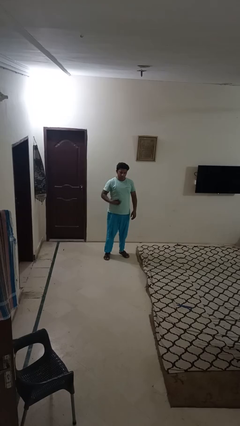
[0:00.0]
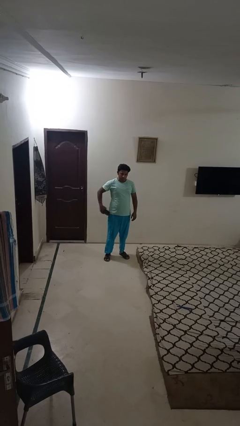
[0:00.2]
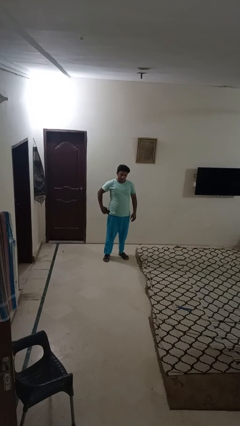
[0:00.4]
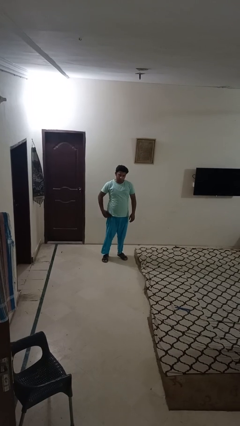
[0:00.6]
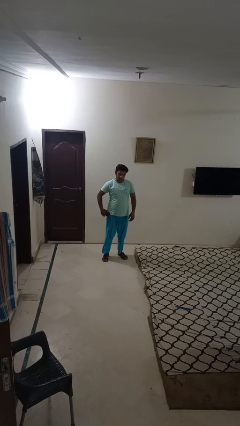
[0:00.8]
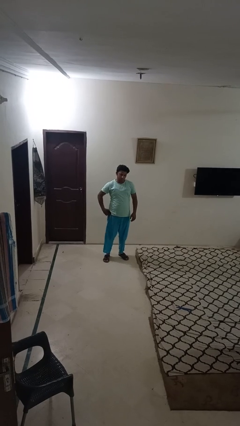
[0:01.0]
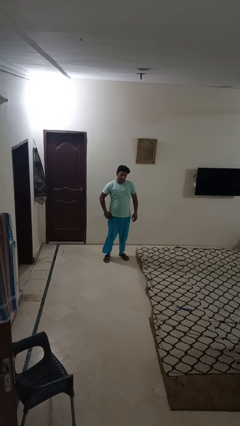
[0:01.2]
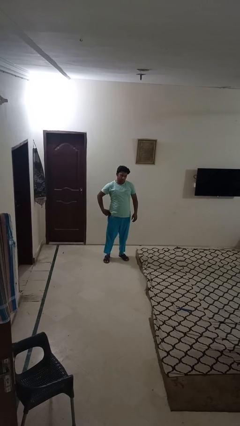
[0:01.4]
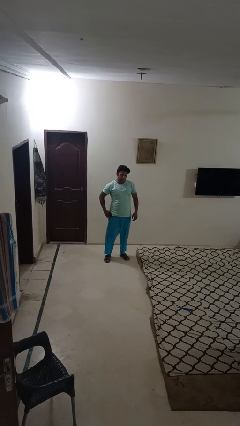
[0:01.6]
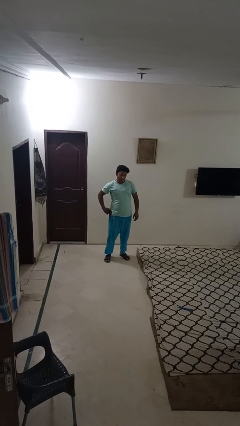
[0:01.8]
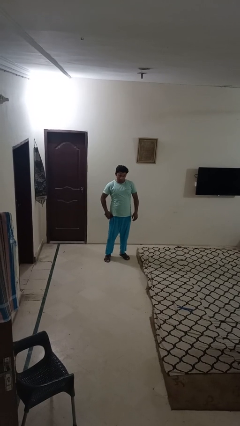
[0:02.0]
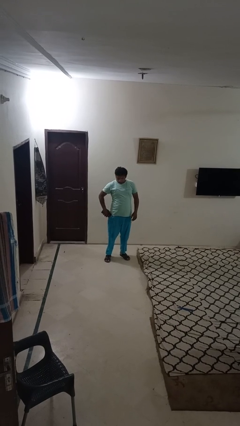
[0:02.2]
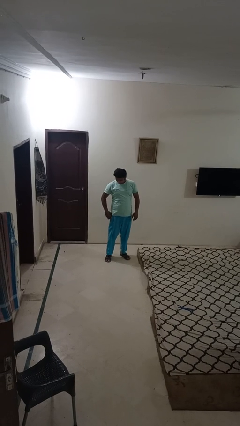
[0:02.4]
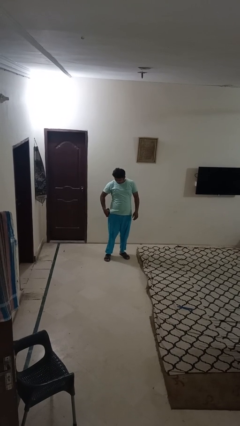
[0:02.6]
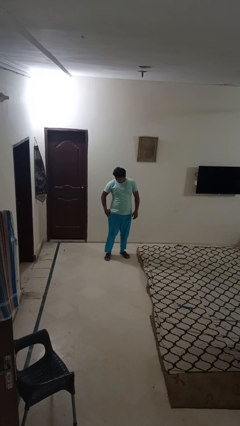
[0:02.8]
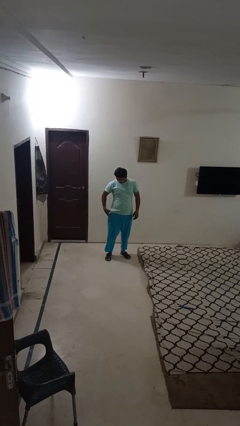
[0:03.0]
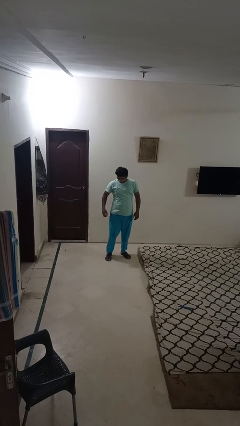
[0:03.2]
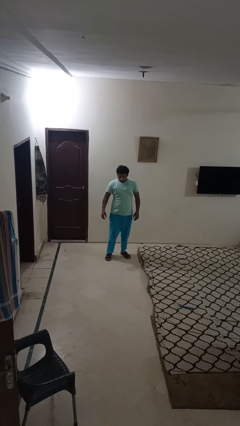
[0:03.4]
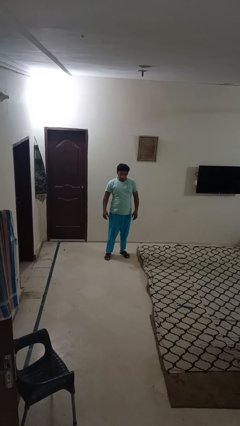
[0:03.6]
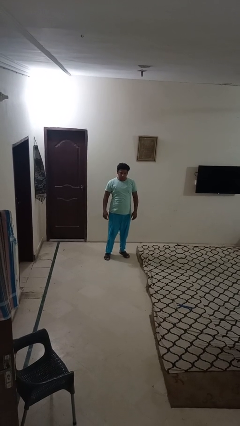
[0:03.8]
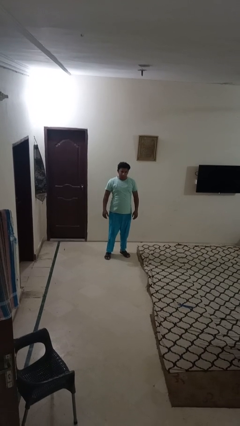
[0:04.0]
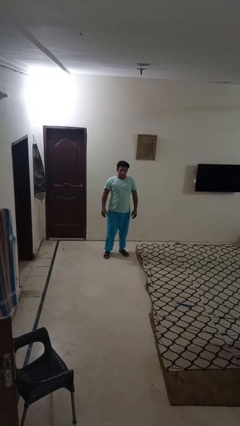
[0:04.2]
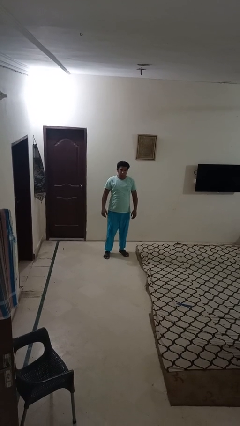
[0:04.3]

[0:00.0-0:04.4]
person puts phone into pocket

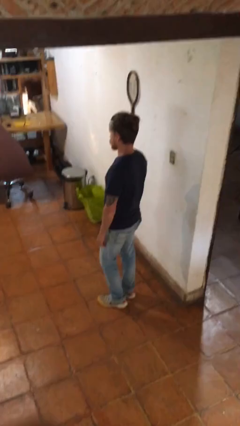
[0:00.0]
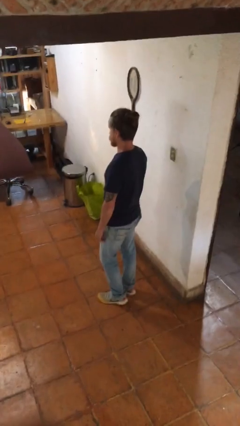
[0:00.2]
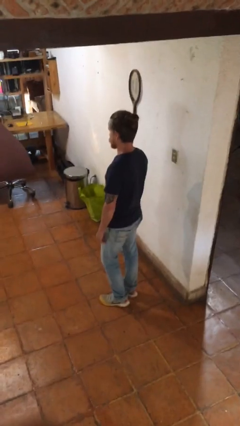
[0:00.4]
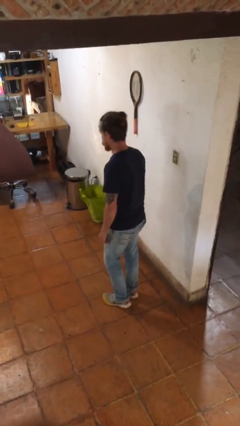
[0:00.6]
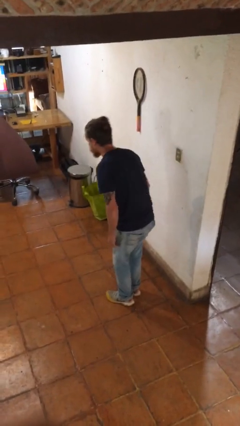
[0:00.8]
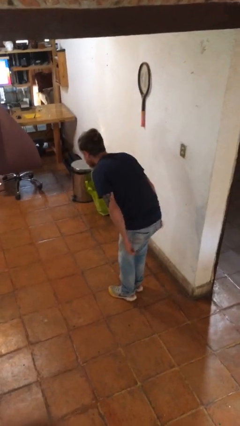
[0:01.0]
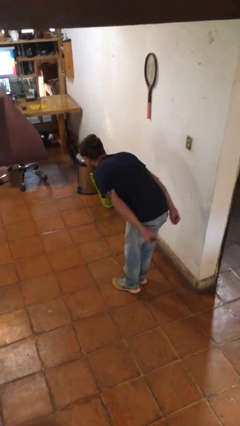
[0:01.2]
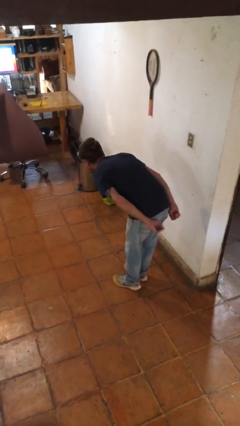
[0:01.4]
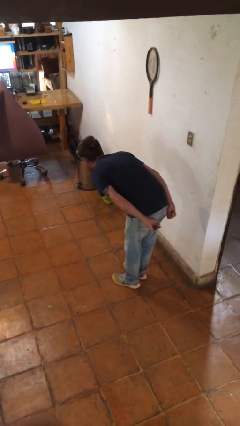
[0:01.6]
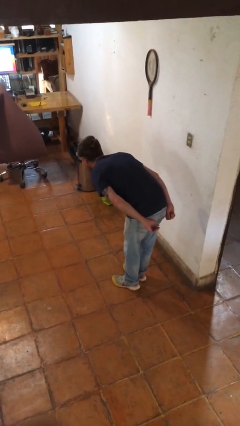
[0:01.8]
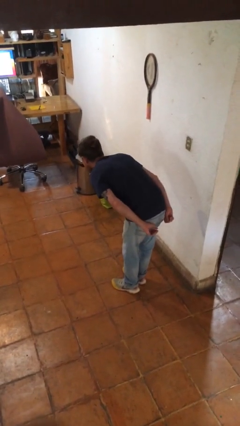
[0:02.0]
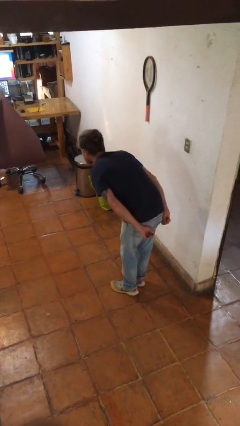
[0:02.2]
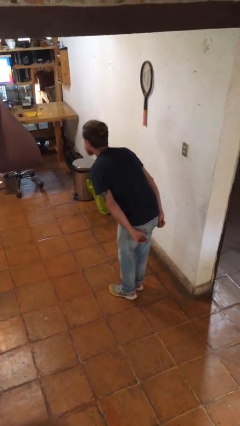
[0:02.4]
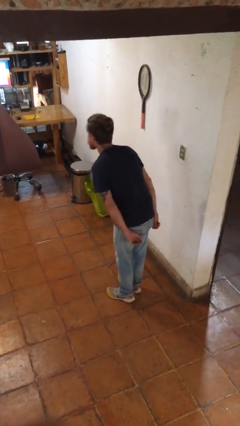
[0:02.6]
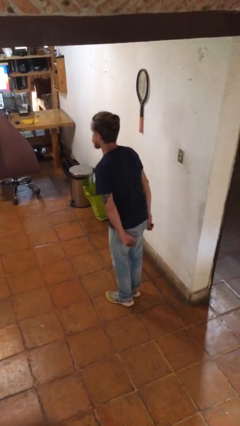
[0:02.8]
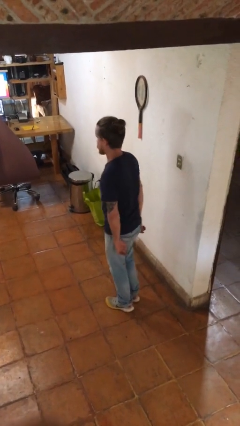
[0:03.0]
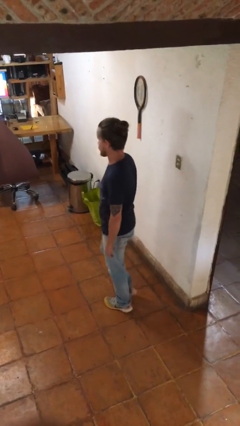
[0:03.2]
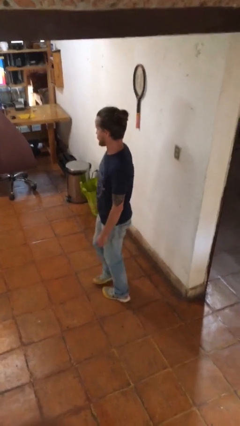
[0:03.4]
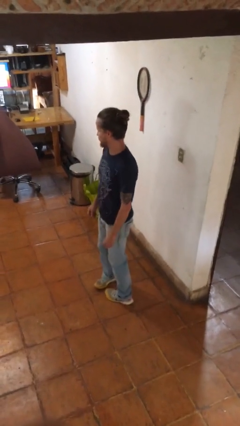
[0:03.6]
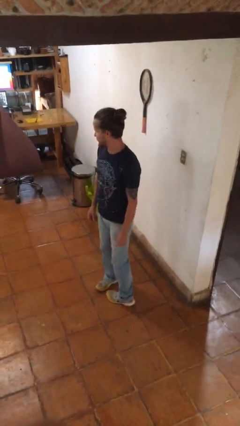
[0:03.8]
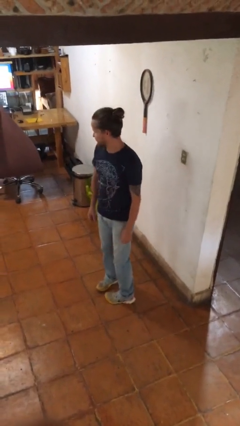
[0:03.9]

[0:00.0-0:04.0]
person bows

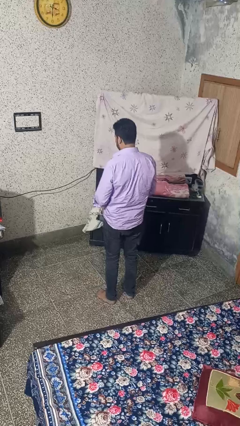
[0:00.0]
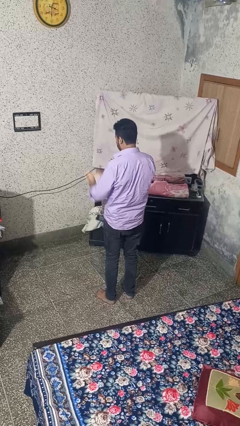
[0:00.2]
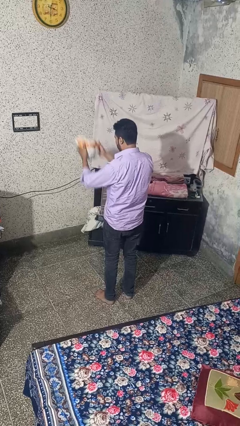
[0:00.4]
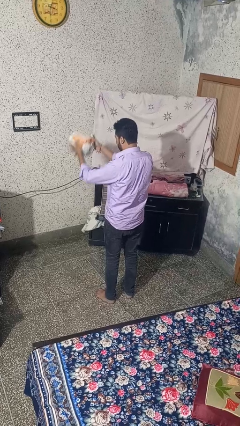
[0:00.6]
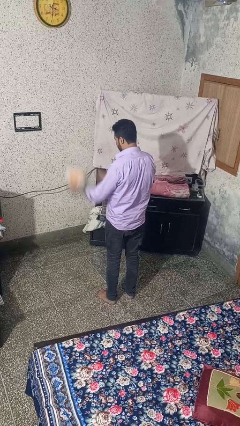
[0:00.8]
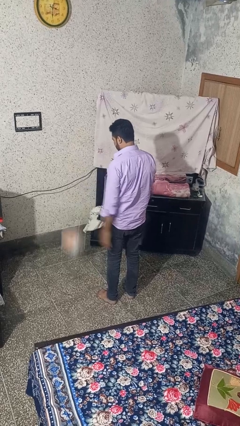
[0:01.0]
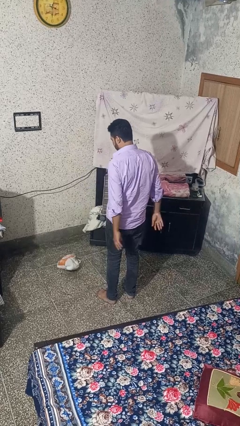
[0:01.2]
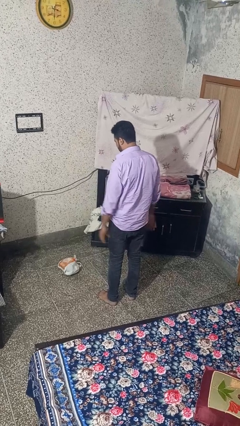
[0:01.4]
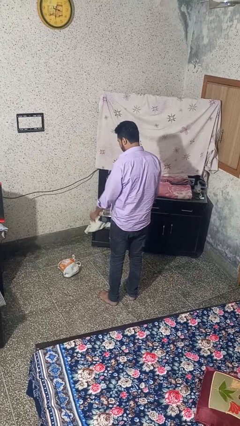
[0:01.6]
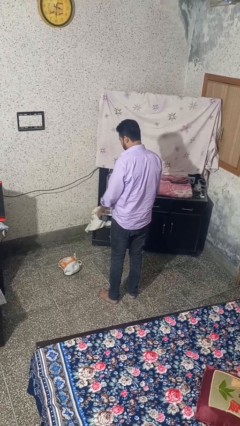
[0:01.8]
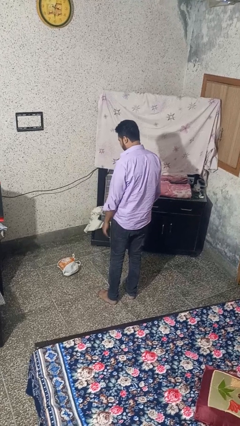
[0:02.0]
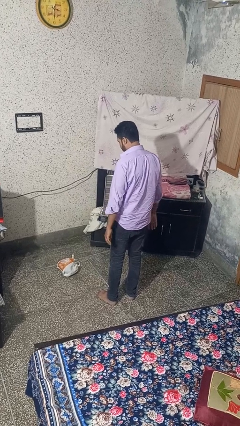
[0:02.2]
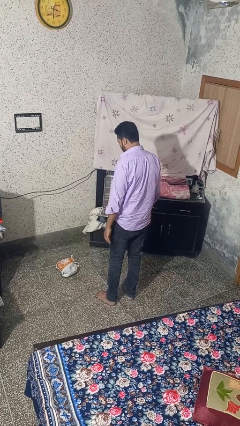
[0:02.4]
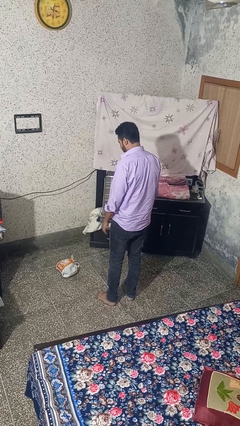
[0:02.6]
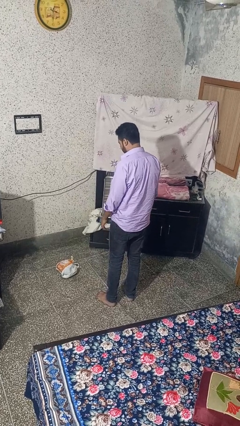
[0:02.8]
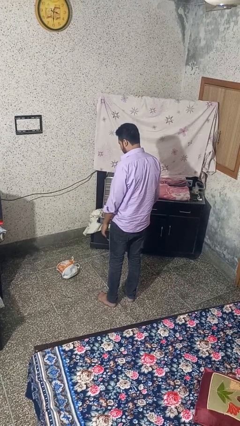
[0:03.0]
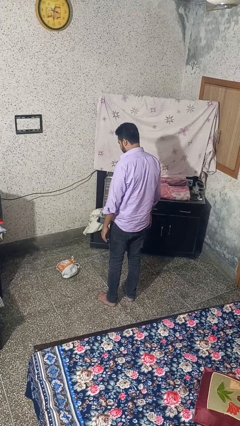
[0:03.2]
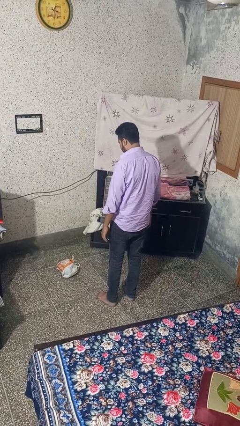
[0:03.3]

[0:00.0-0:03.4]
person throws object to ground

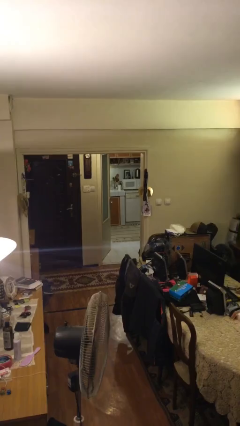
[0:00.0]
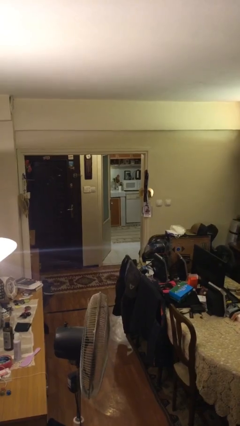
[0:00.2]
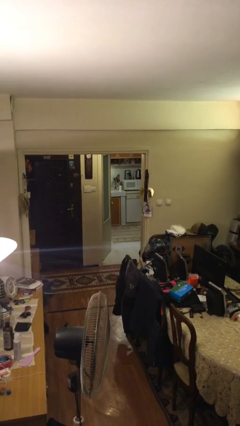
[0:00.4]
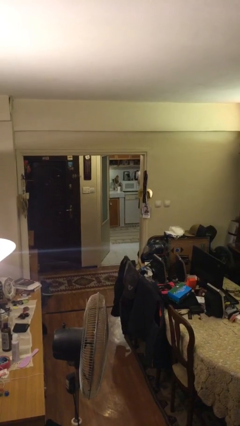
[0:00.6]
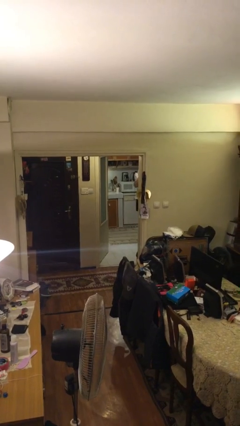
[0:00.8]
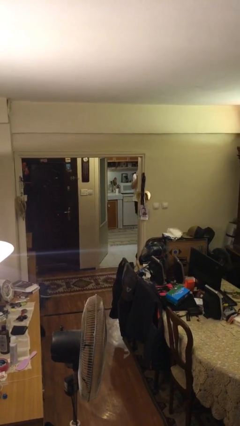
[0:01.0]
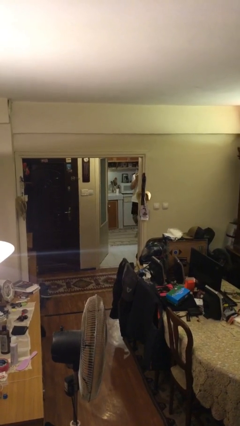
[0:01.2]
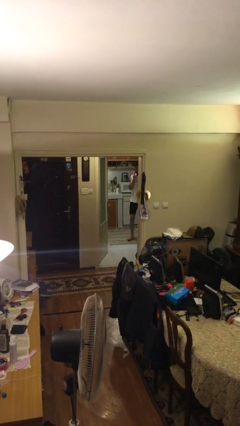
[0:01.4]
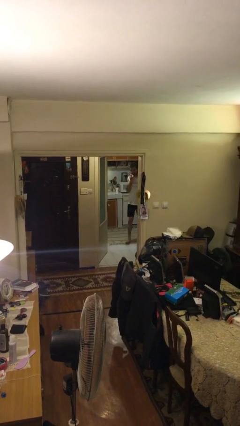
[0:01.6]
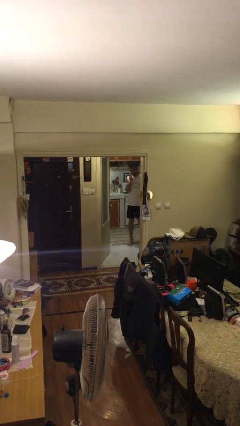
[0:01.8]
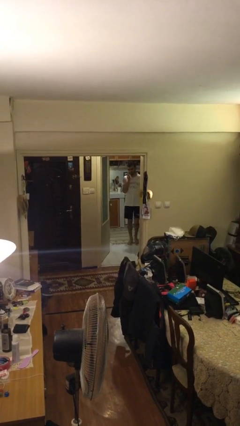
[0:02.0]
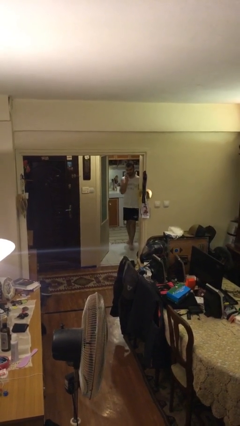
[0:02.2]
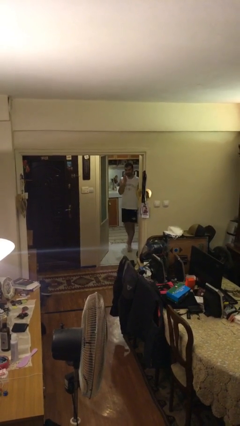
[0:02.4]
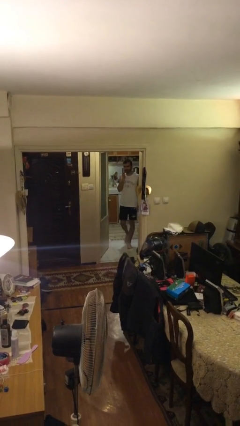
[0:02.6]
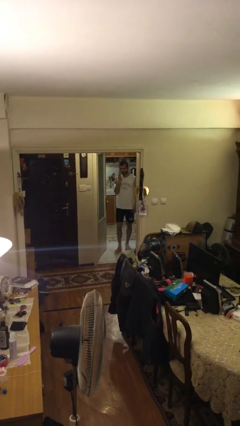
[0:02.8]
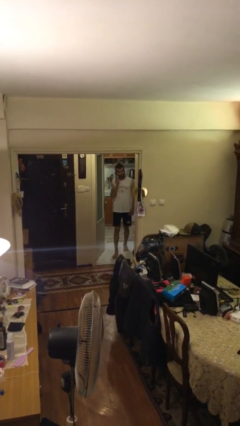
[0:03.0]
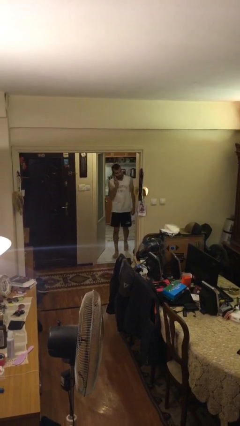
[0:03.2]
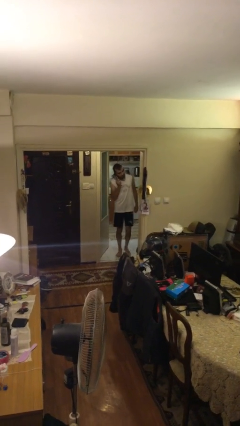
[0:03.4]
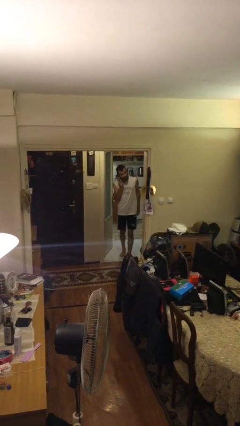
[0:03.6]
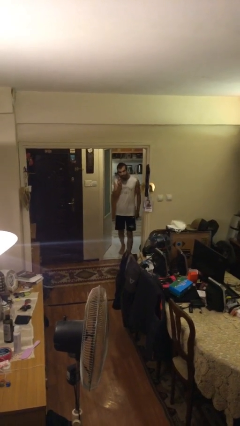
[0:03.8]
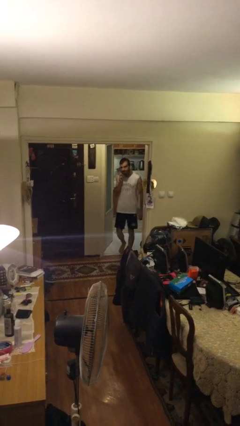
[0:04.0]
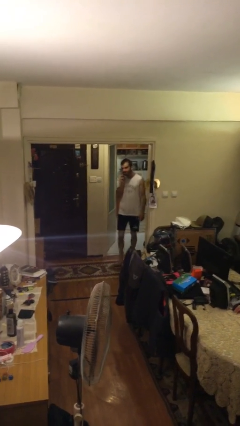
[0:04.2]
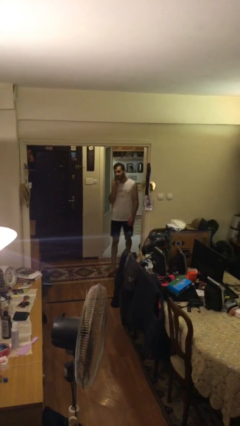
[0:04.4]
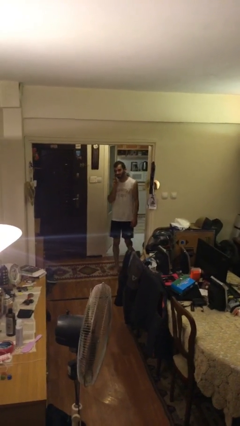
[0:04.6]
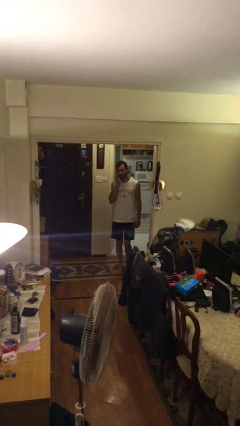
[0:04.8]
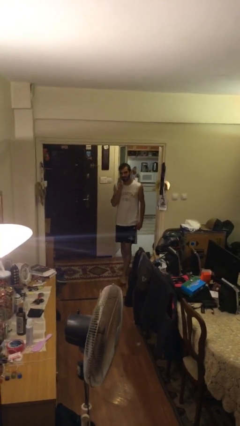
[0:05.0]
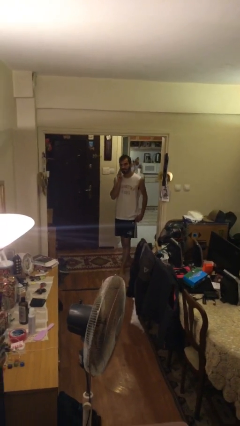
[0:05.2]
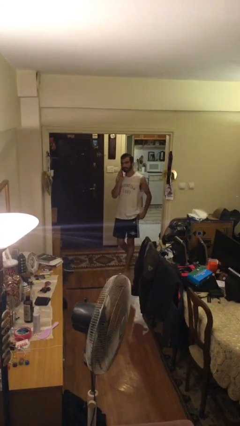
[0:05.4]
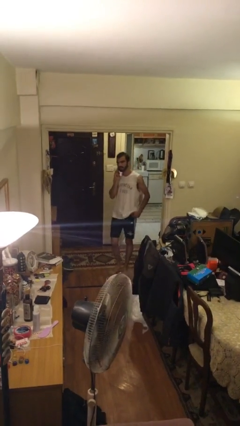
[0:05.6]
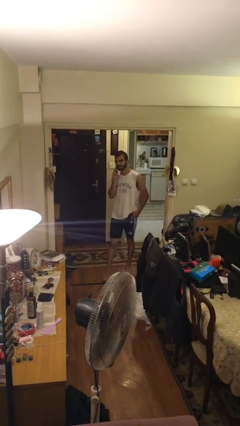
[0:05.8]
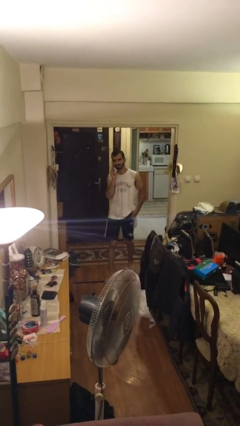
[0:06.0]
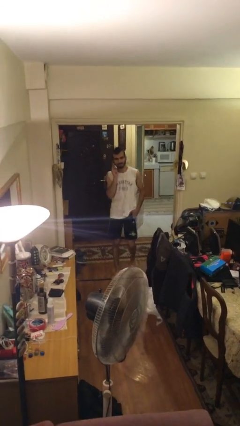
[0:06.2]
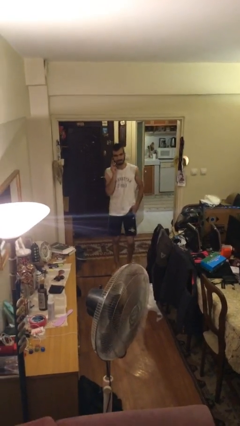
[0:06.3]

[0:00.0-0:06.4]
person enters scene through structure
